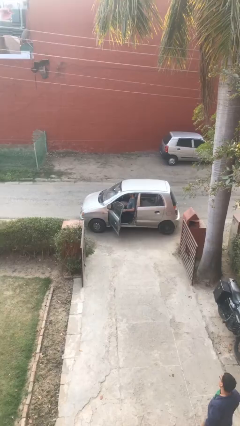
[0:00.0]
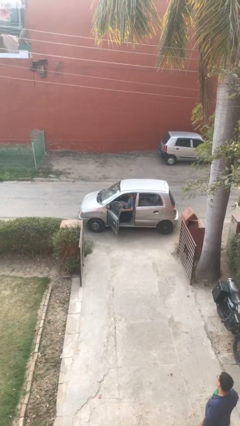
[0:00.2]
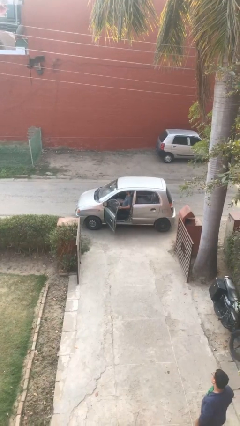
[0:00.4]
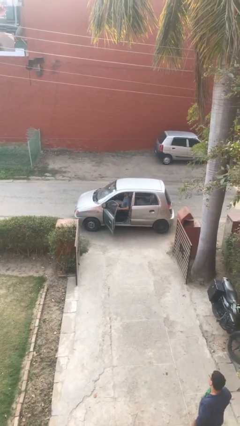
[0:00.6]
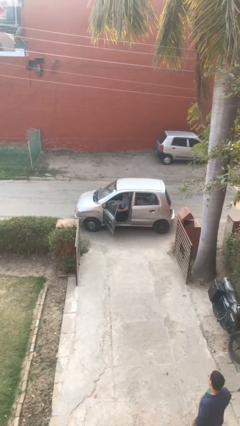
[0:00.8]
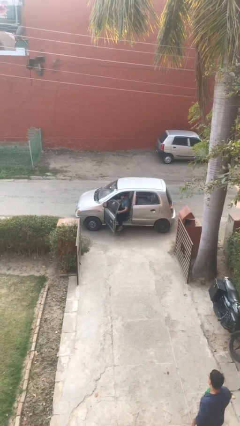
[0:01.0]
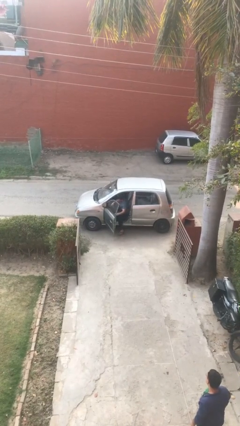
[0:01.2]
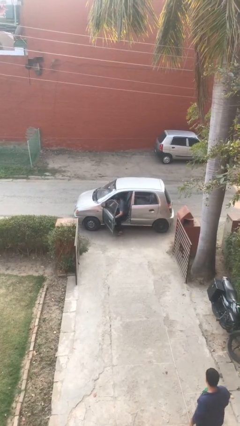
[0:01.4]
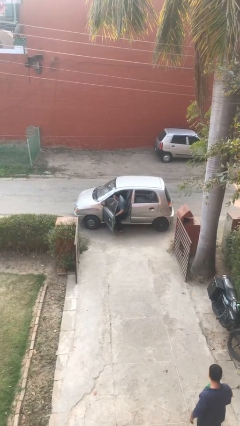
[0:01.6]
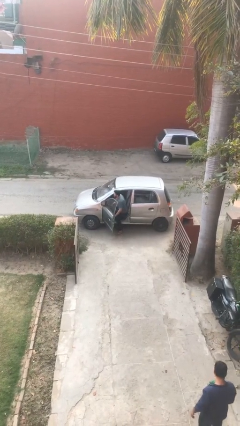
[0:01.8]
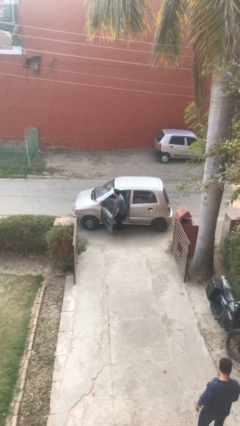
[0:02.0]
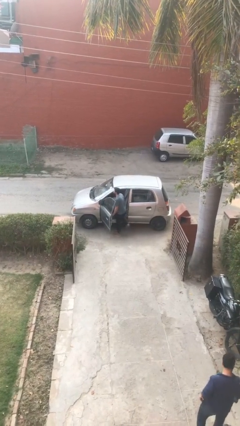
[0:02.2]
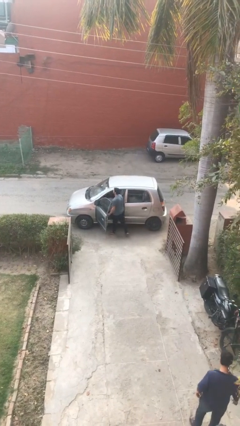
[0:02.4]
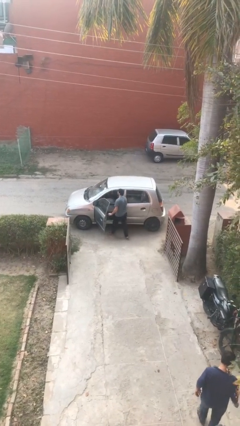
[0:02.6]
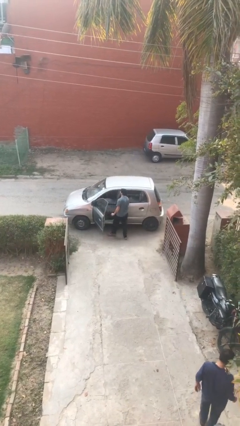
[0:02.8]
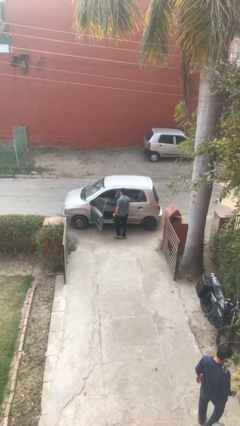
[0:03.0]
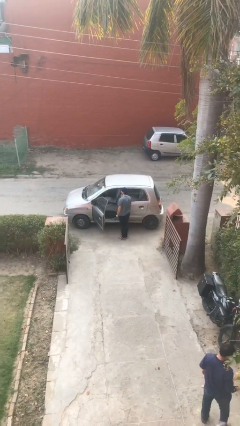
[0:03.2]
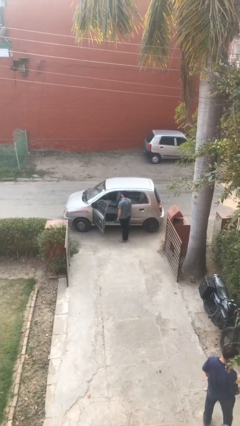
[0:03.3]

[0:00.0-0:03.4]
person exits car

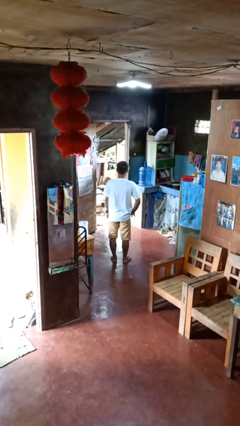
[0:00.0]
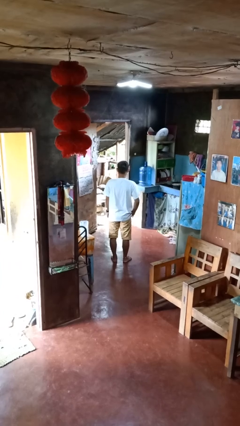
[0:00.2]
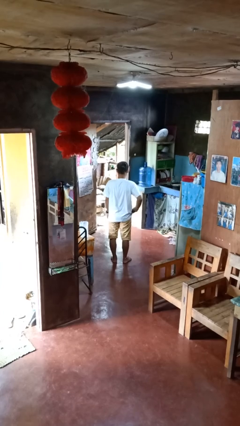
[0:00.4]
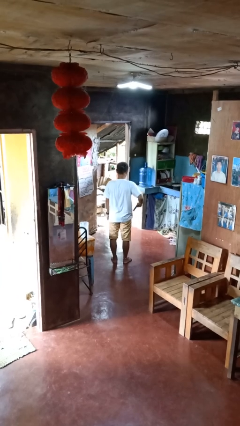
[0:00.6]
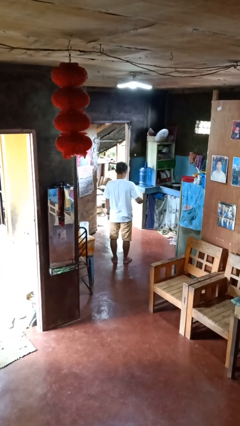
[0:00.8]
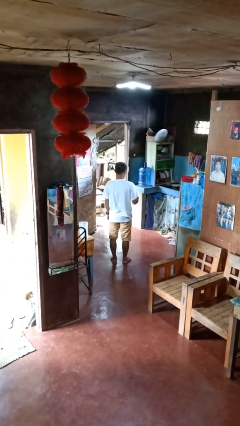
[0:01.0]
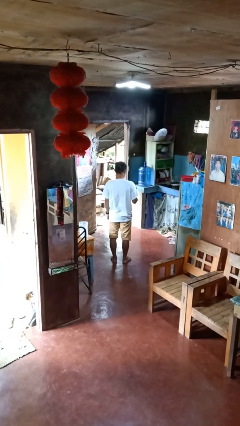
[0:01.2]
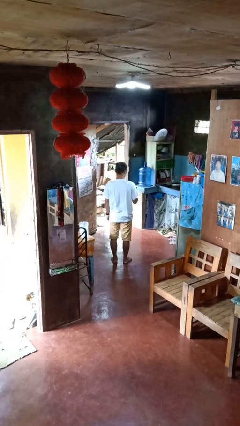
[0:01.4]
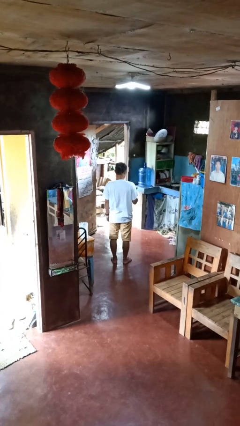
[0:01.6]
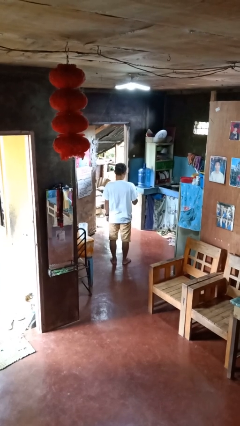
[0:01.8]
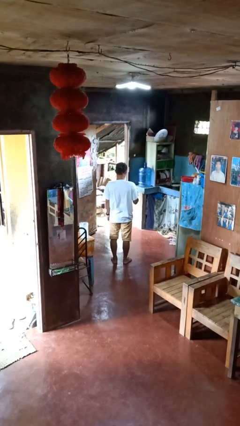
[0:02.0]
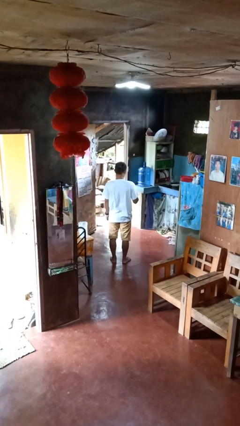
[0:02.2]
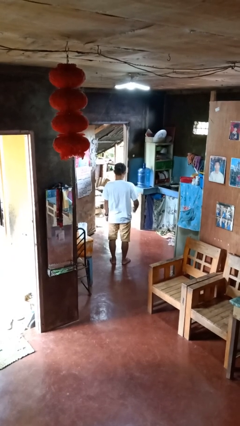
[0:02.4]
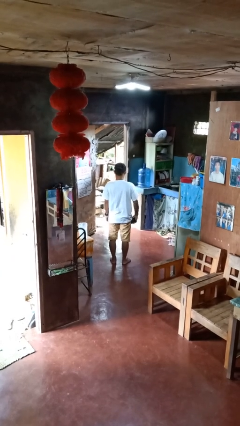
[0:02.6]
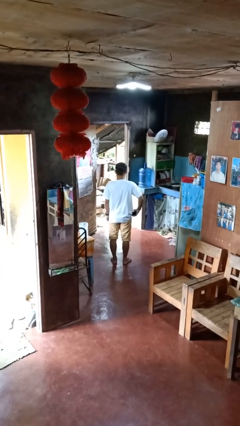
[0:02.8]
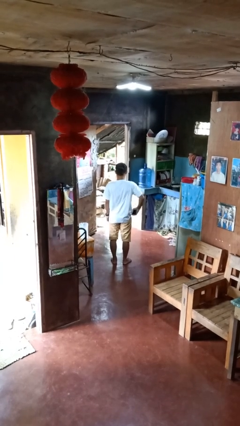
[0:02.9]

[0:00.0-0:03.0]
person takes phone from pocket

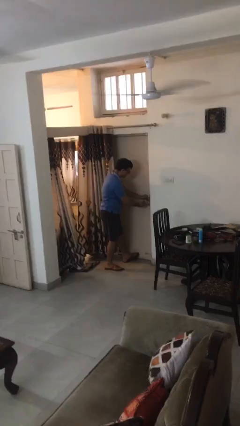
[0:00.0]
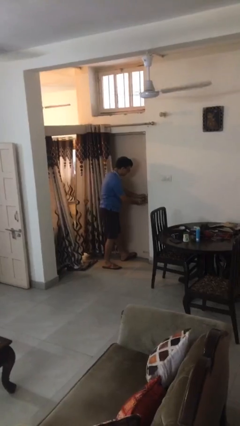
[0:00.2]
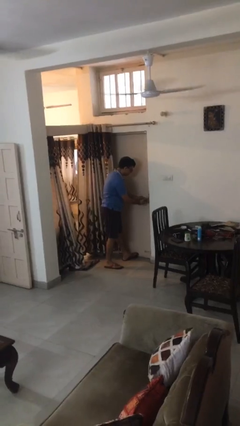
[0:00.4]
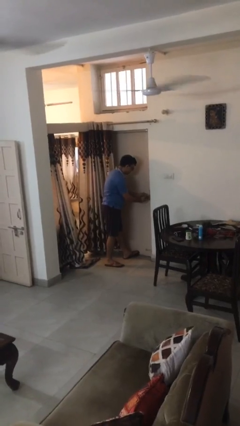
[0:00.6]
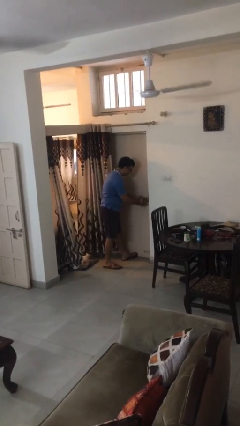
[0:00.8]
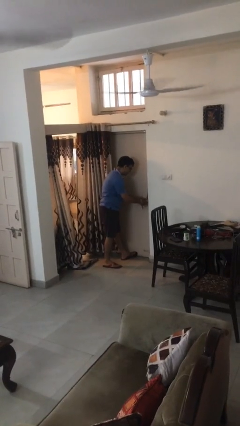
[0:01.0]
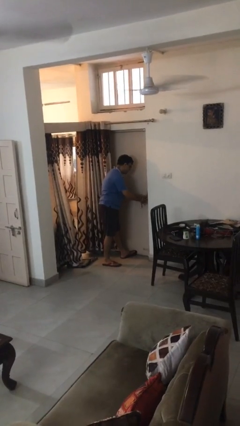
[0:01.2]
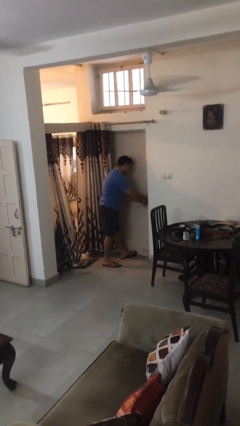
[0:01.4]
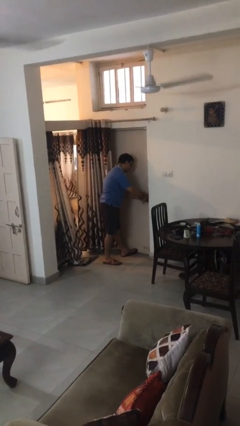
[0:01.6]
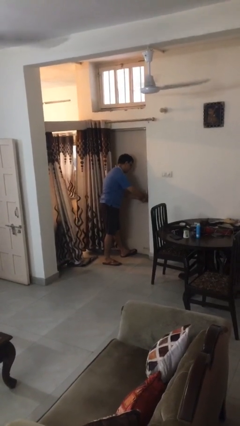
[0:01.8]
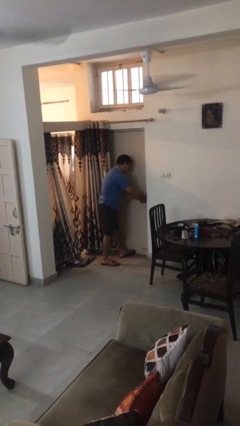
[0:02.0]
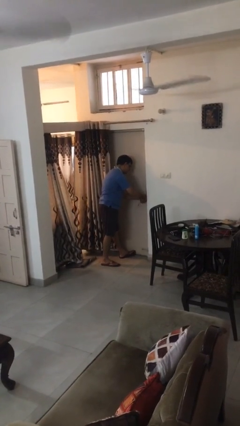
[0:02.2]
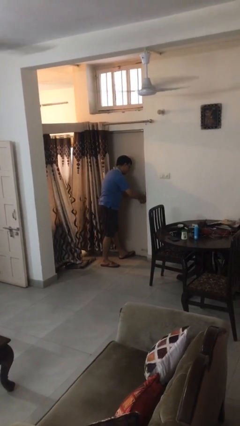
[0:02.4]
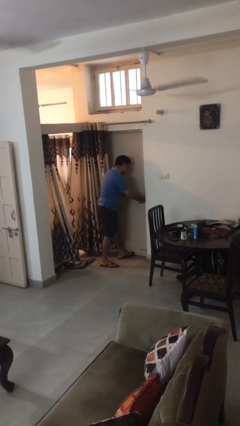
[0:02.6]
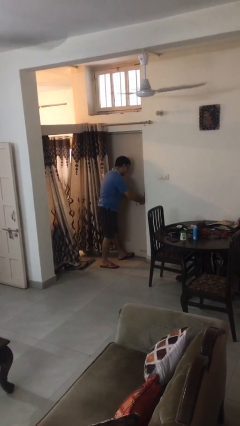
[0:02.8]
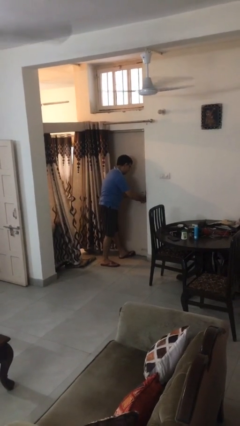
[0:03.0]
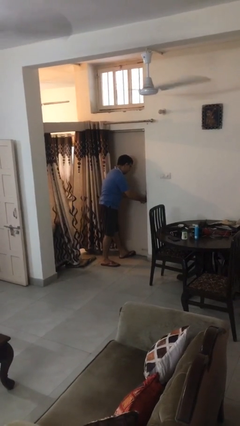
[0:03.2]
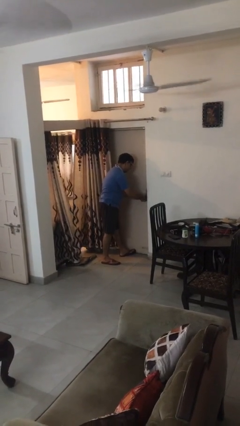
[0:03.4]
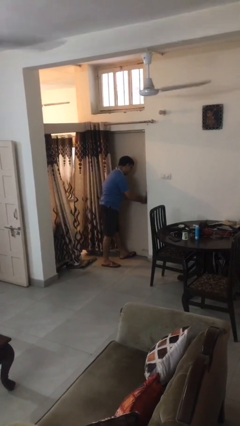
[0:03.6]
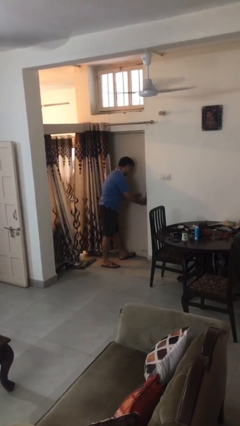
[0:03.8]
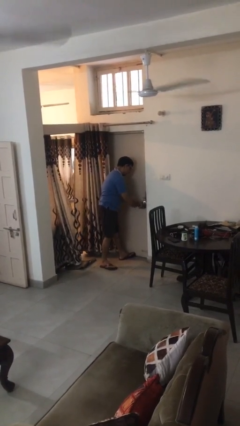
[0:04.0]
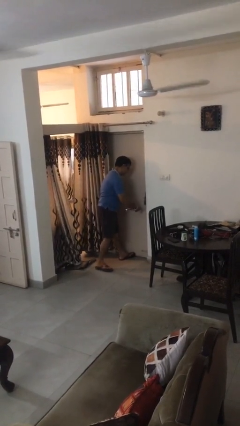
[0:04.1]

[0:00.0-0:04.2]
person locks door with keys

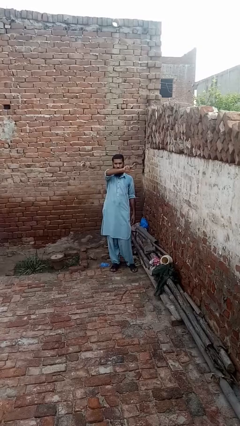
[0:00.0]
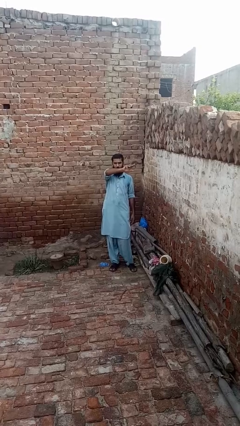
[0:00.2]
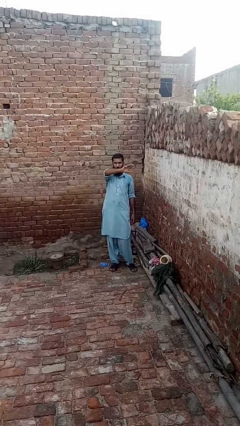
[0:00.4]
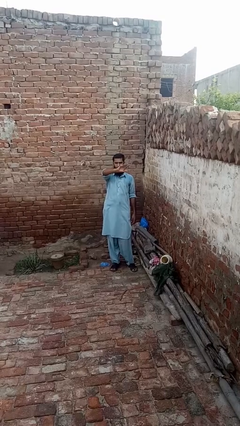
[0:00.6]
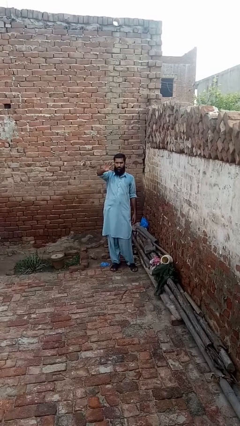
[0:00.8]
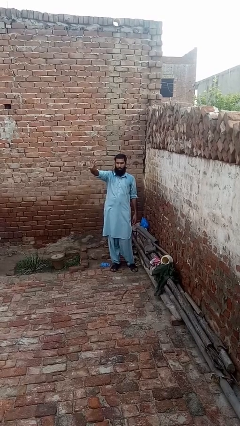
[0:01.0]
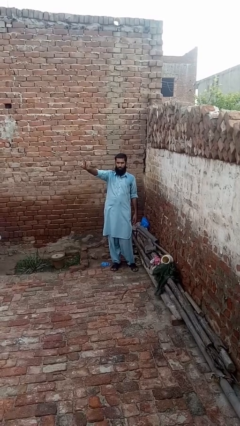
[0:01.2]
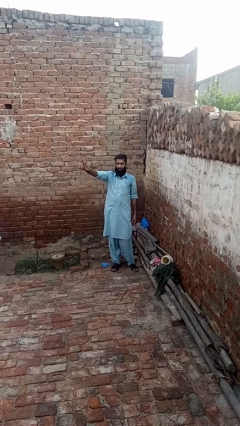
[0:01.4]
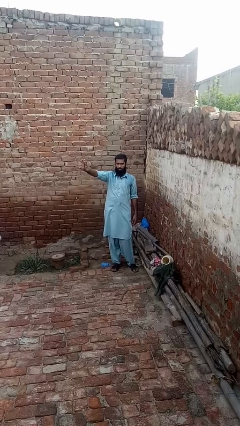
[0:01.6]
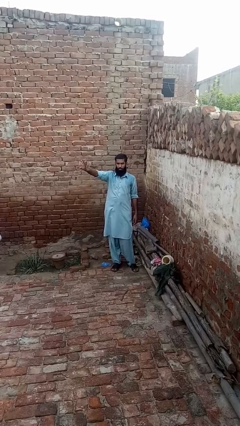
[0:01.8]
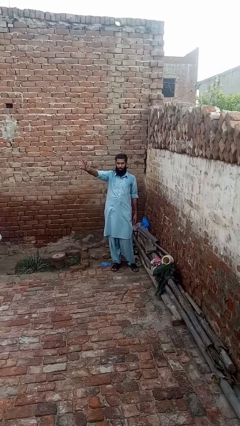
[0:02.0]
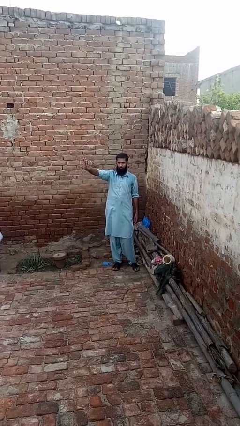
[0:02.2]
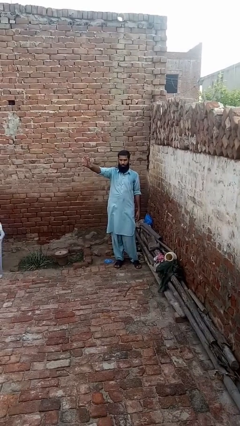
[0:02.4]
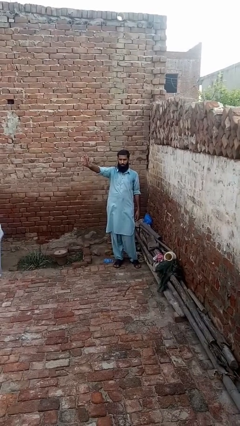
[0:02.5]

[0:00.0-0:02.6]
person gestures swipe right

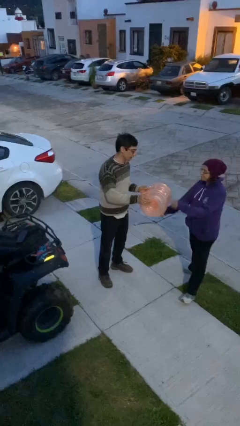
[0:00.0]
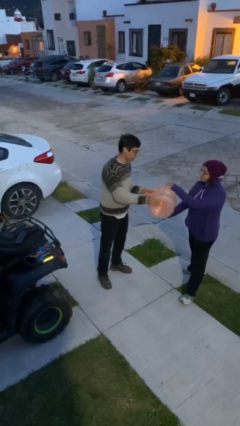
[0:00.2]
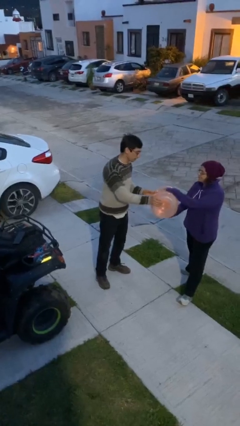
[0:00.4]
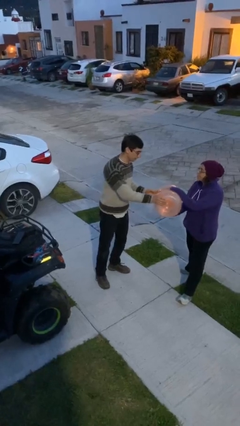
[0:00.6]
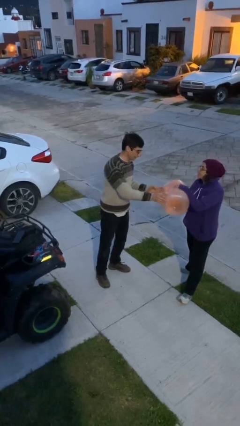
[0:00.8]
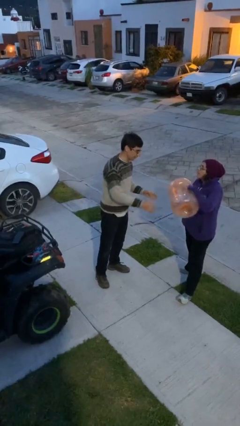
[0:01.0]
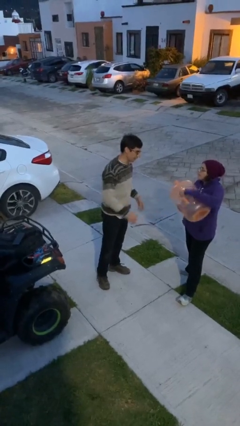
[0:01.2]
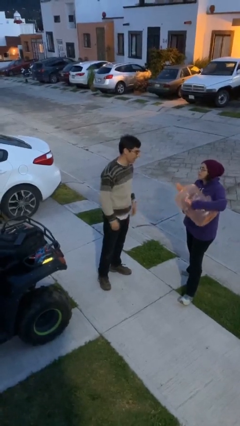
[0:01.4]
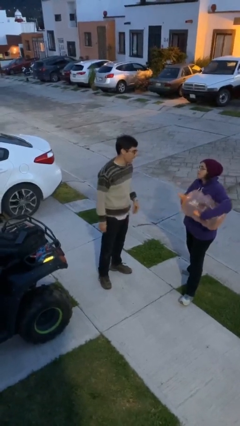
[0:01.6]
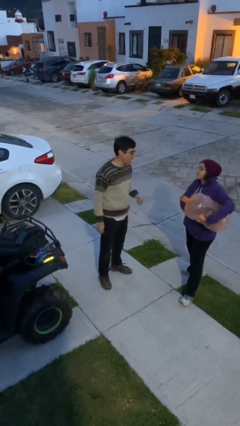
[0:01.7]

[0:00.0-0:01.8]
person transfers object to person

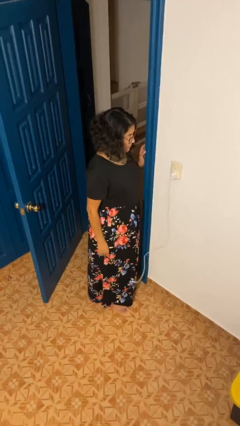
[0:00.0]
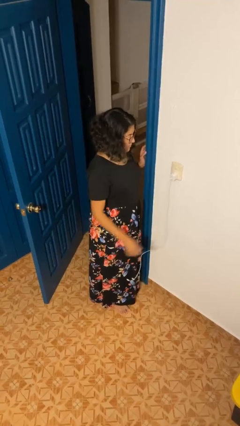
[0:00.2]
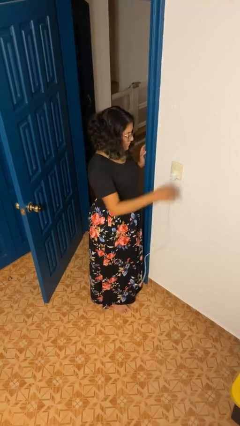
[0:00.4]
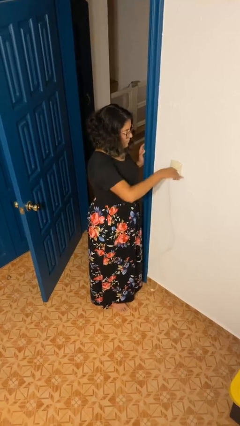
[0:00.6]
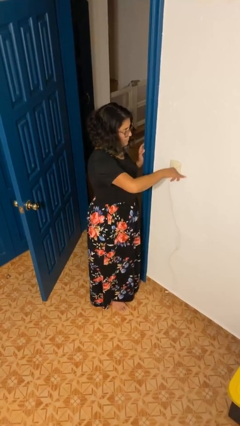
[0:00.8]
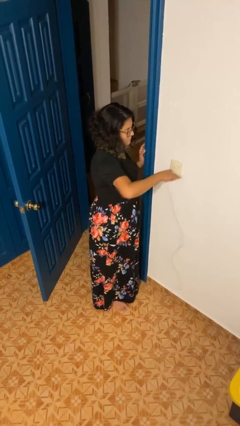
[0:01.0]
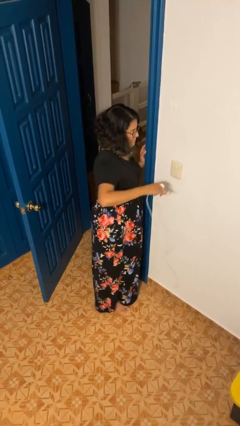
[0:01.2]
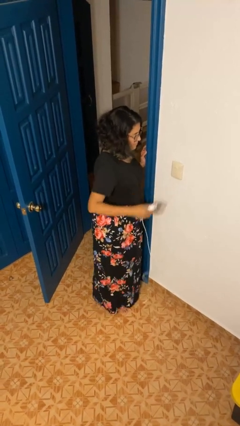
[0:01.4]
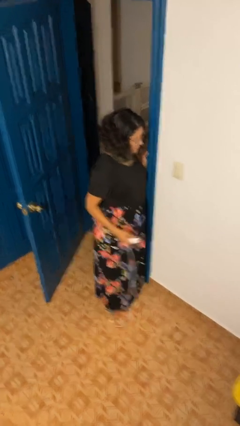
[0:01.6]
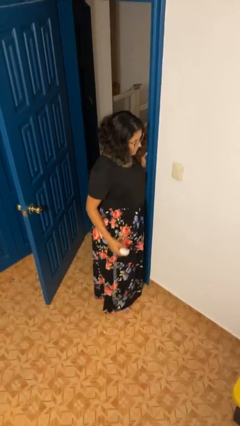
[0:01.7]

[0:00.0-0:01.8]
person unplugs from electrical socket

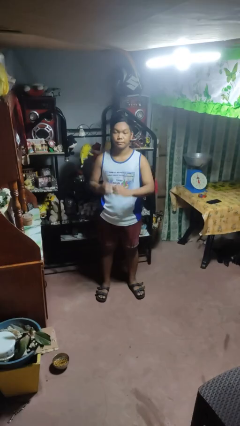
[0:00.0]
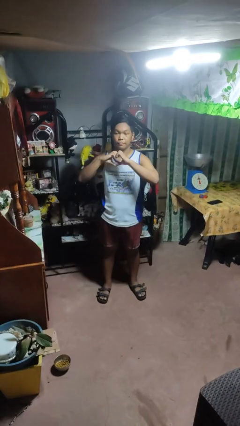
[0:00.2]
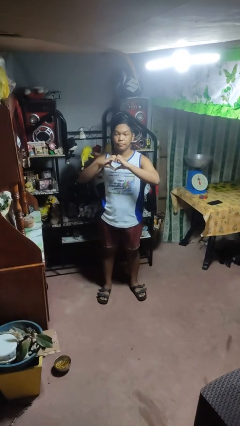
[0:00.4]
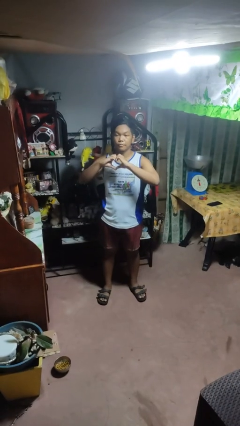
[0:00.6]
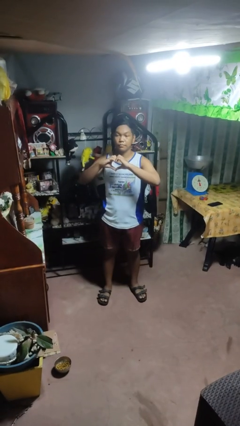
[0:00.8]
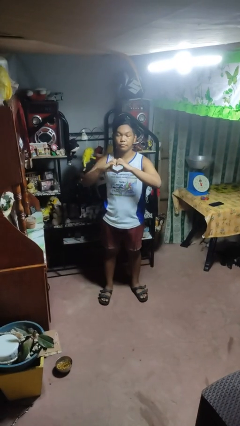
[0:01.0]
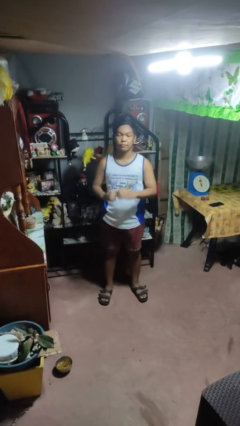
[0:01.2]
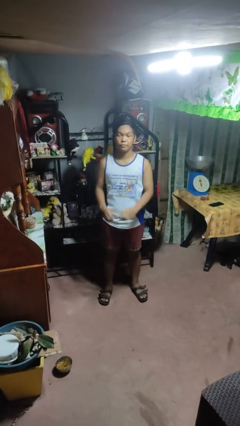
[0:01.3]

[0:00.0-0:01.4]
person gestures heart
